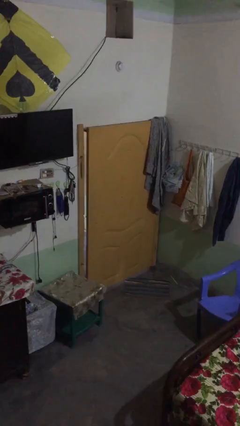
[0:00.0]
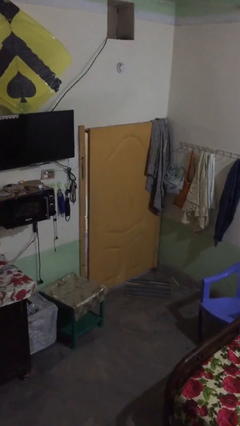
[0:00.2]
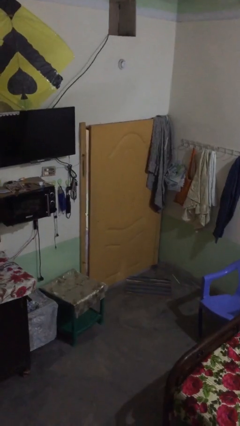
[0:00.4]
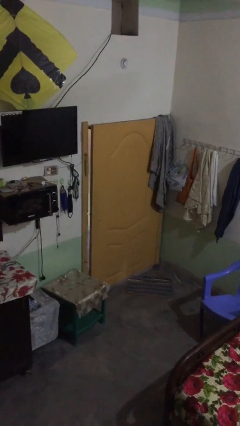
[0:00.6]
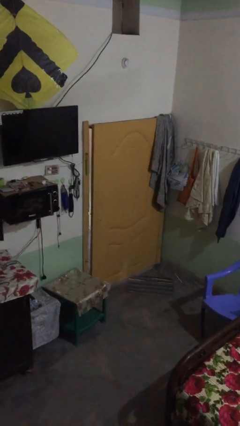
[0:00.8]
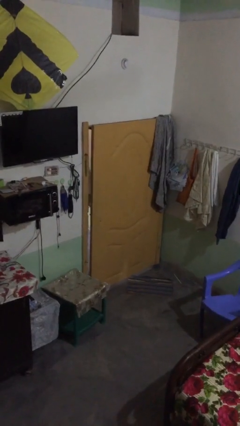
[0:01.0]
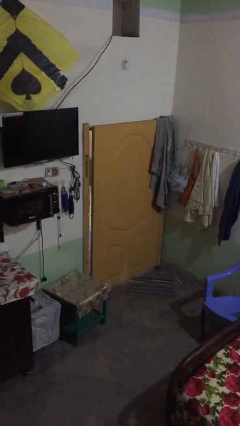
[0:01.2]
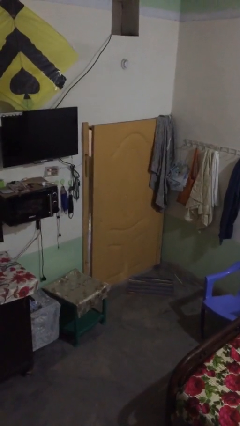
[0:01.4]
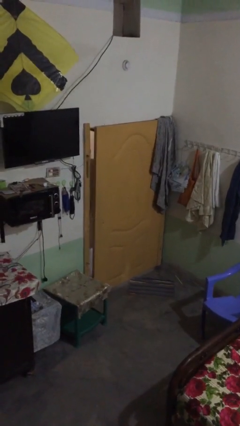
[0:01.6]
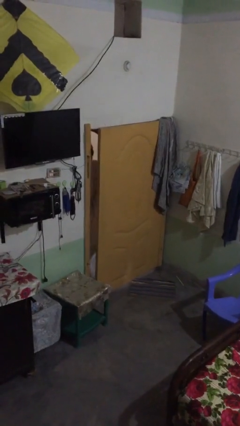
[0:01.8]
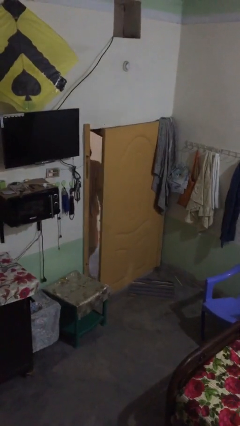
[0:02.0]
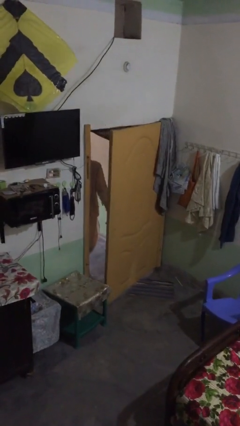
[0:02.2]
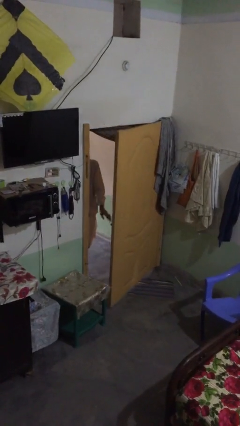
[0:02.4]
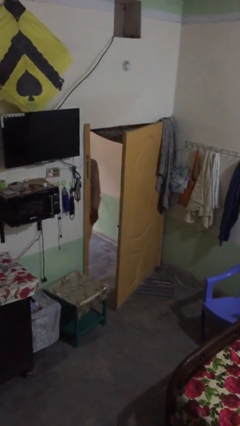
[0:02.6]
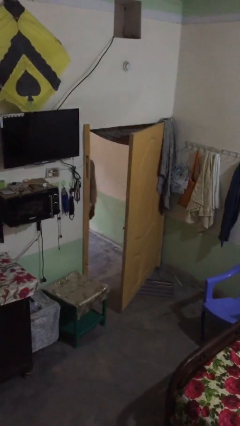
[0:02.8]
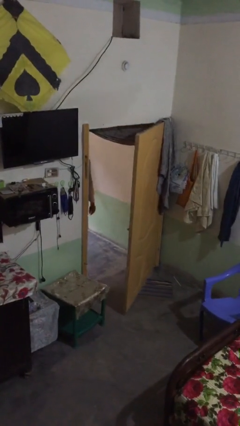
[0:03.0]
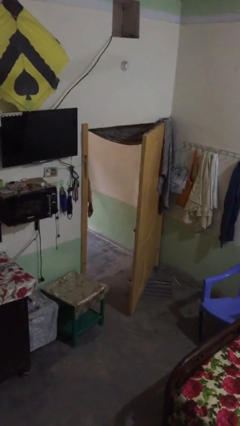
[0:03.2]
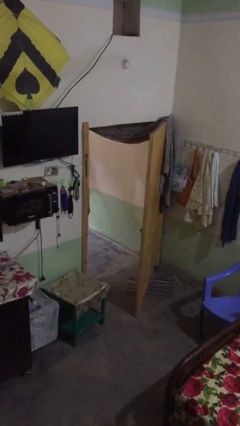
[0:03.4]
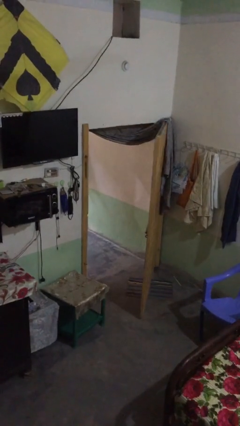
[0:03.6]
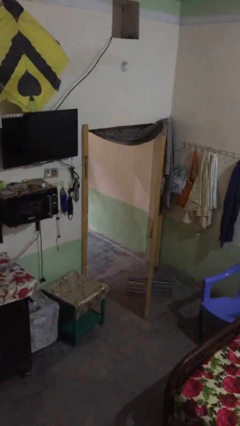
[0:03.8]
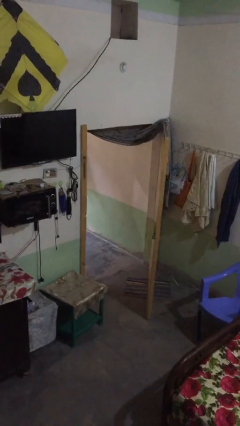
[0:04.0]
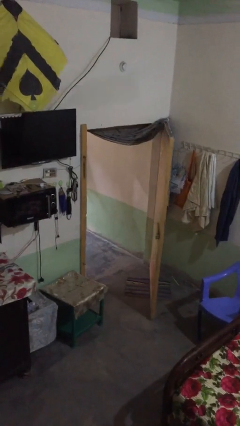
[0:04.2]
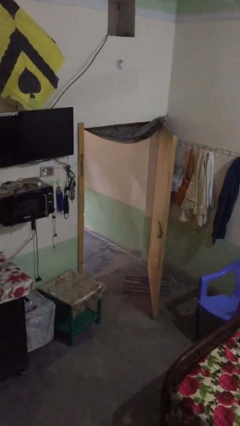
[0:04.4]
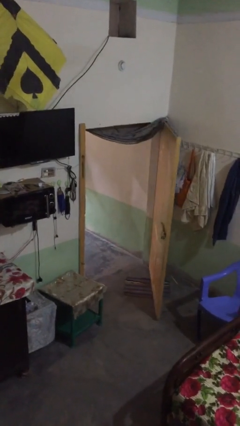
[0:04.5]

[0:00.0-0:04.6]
person opens facility door

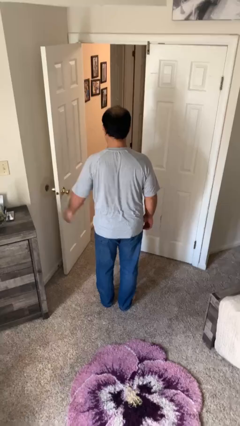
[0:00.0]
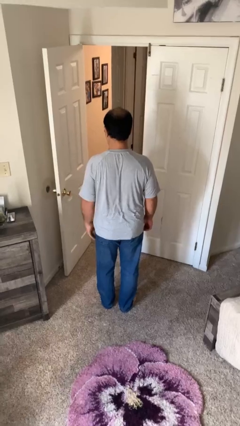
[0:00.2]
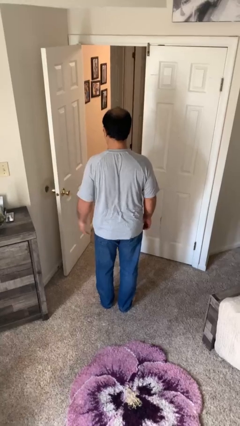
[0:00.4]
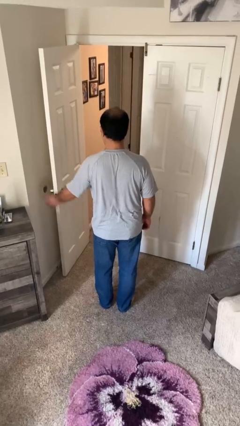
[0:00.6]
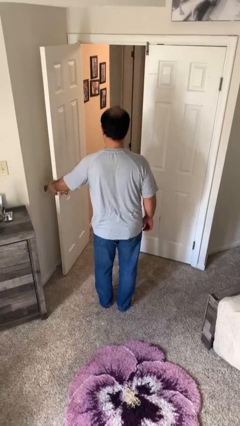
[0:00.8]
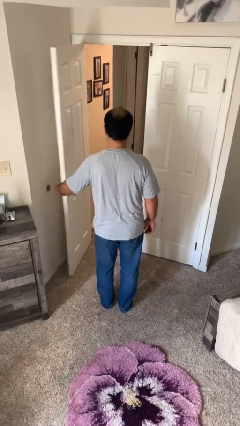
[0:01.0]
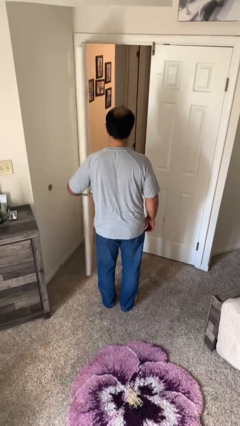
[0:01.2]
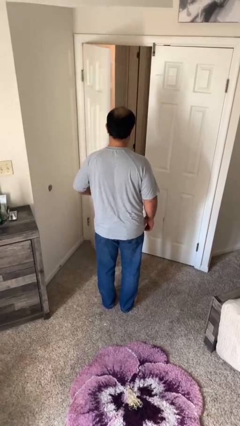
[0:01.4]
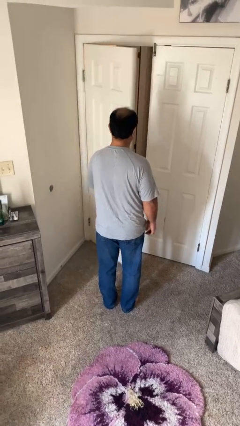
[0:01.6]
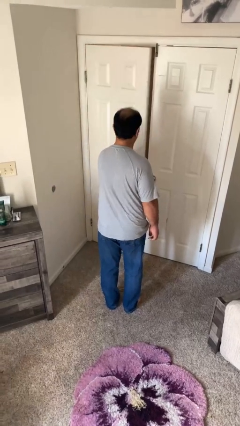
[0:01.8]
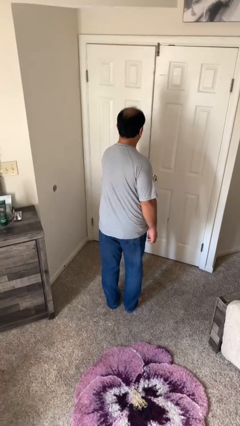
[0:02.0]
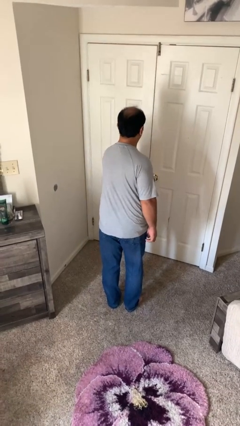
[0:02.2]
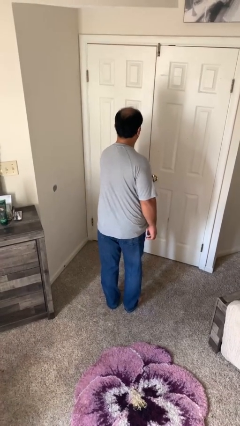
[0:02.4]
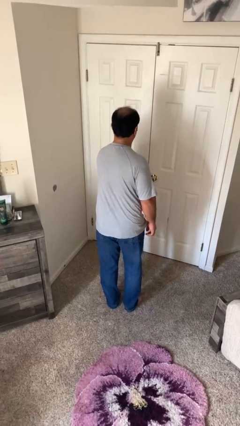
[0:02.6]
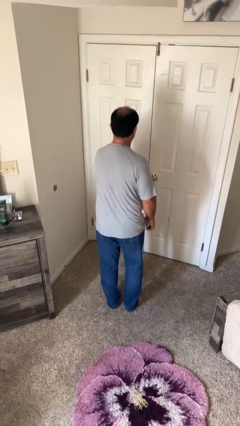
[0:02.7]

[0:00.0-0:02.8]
person closes facility door

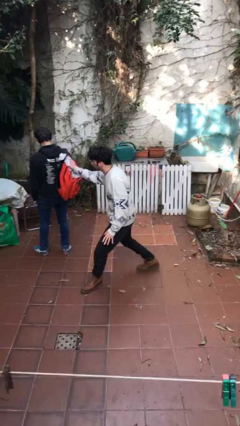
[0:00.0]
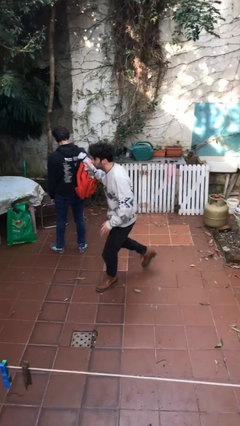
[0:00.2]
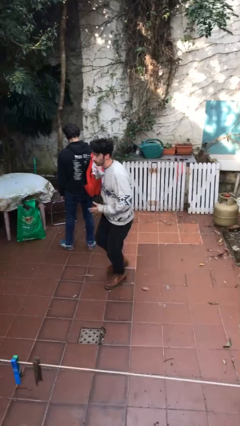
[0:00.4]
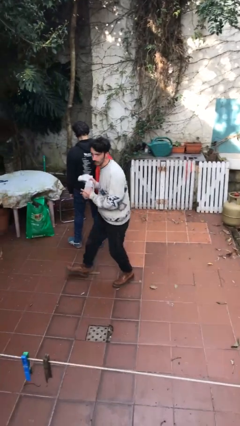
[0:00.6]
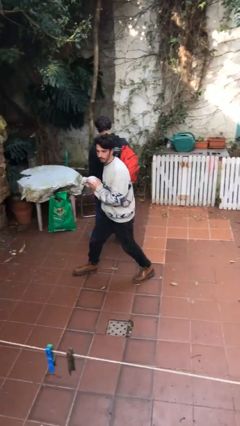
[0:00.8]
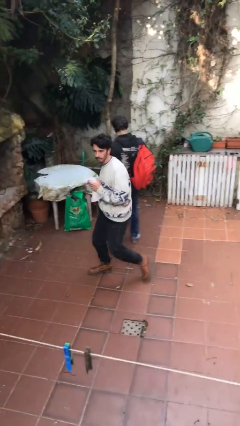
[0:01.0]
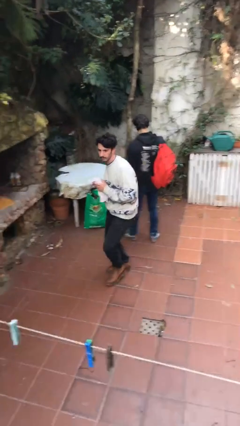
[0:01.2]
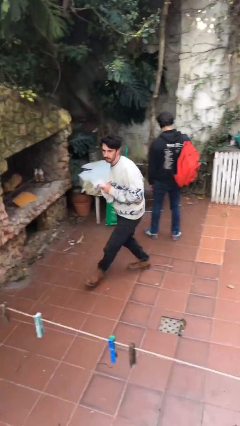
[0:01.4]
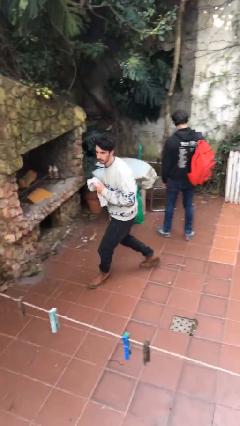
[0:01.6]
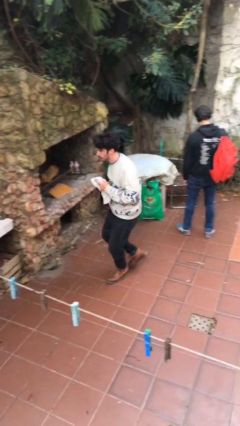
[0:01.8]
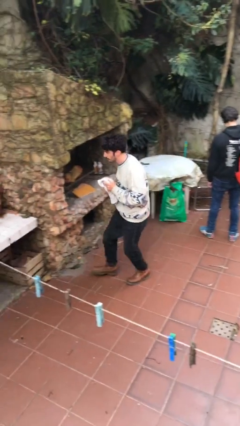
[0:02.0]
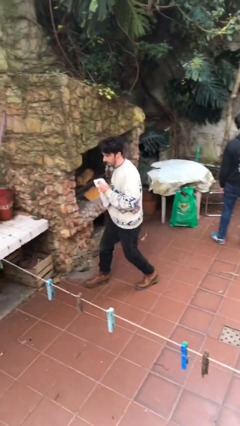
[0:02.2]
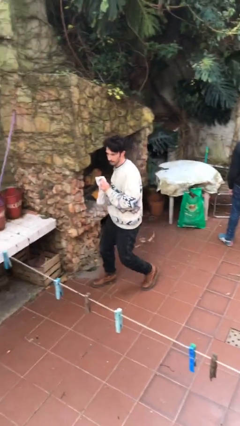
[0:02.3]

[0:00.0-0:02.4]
person steals object from person

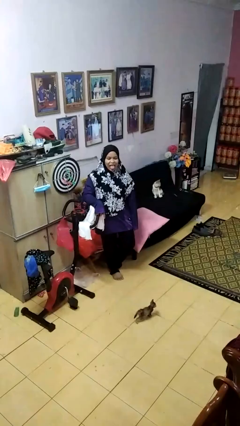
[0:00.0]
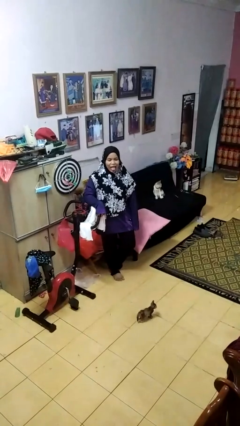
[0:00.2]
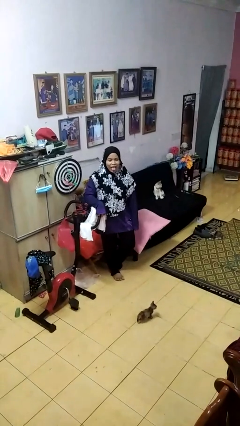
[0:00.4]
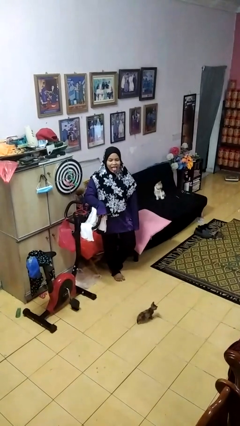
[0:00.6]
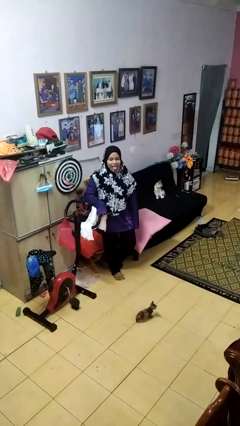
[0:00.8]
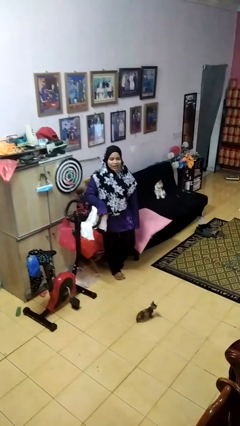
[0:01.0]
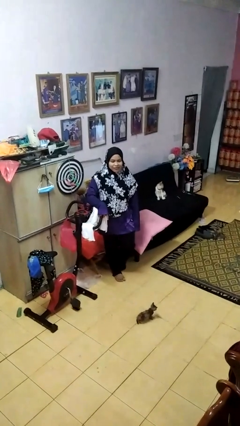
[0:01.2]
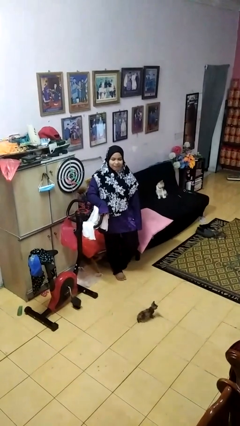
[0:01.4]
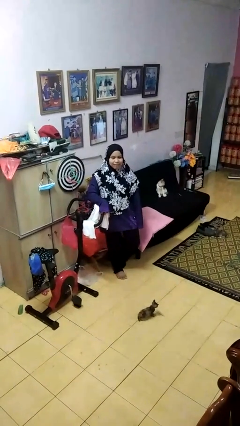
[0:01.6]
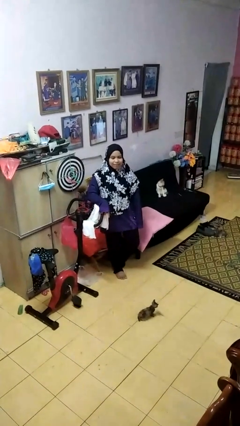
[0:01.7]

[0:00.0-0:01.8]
person sticks out tongue

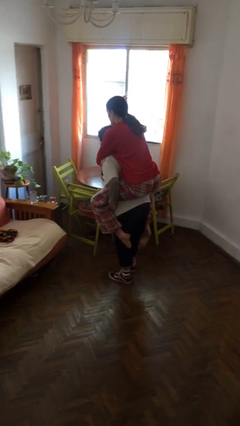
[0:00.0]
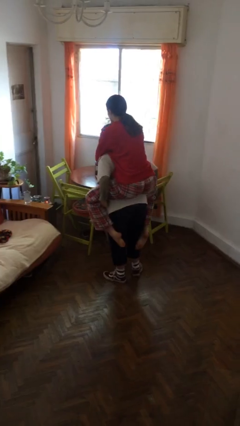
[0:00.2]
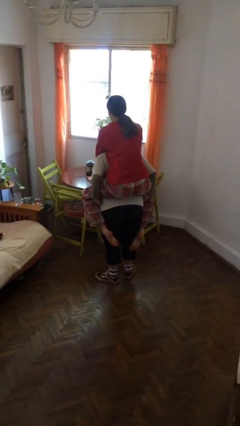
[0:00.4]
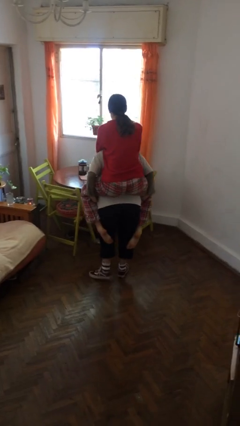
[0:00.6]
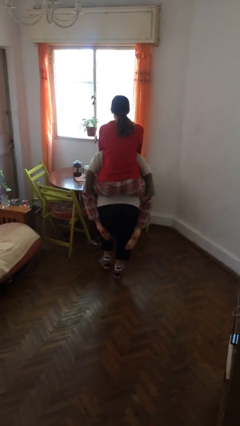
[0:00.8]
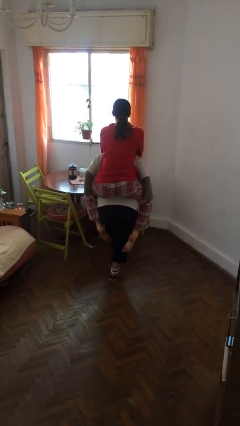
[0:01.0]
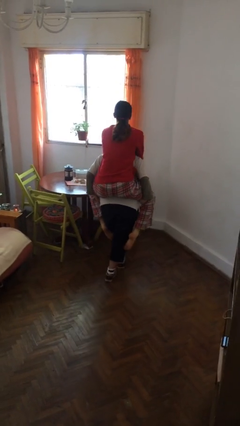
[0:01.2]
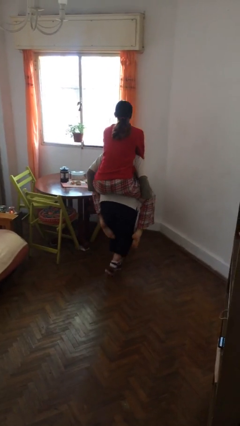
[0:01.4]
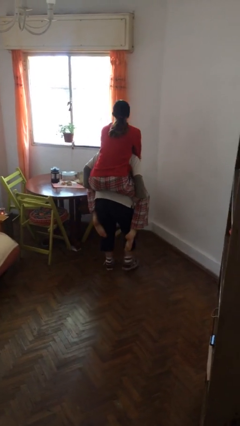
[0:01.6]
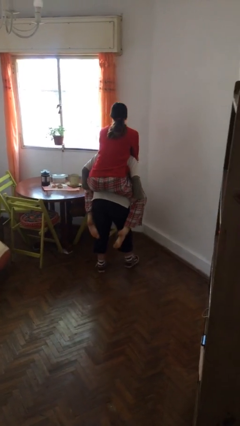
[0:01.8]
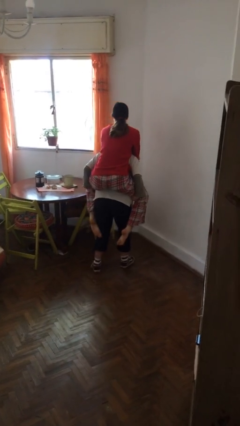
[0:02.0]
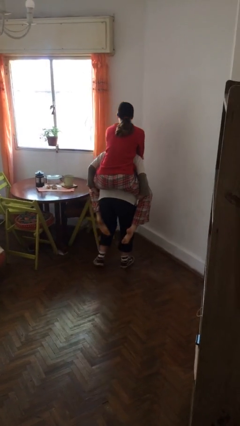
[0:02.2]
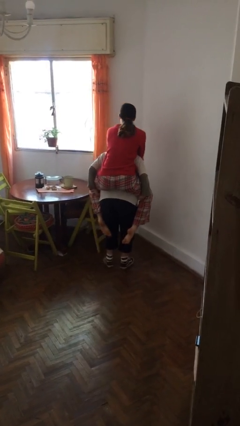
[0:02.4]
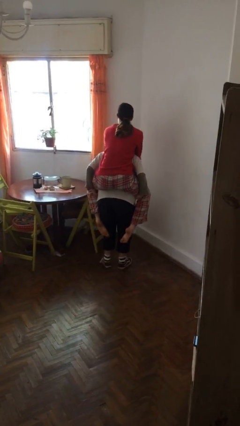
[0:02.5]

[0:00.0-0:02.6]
person carries person on back

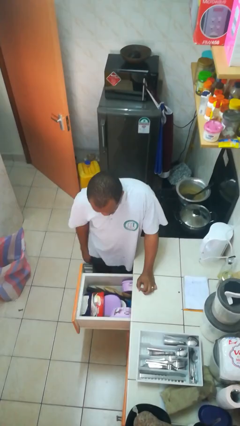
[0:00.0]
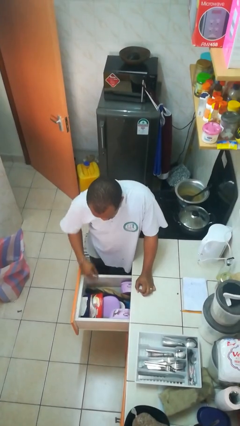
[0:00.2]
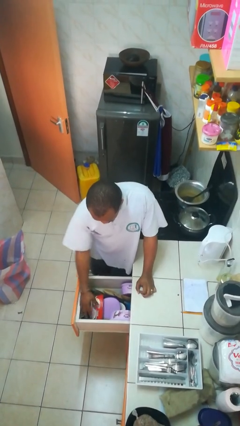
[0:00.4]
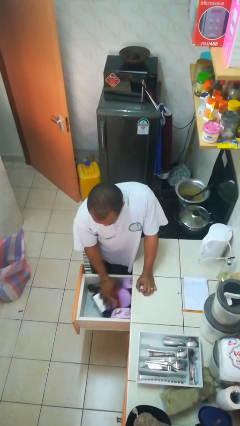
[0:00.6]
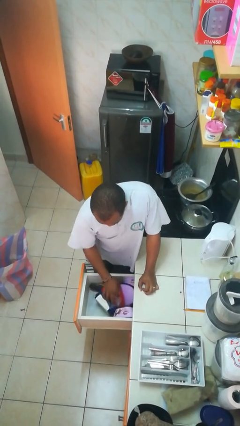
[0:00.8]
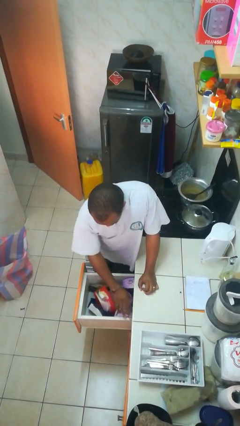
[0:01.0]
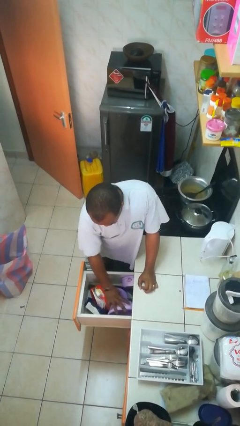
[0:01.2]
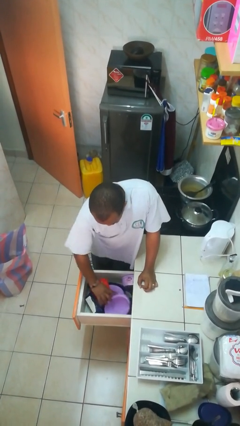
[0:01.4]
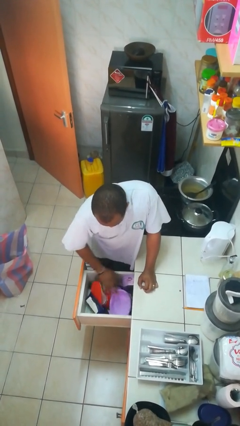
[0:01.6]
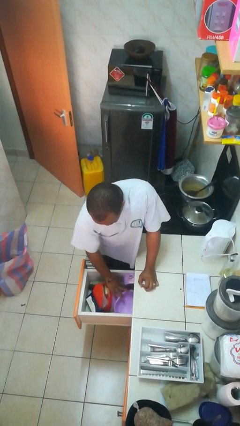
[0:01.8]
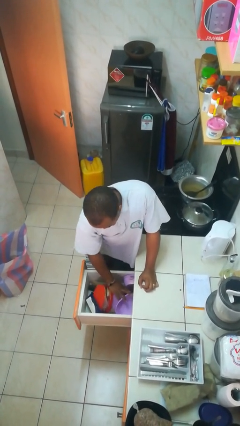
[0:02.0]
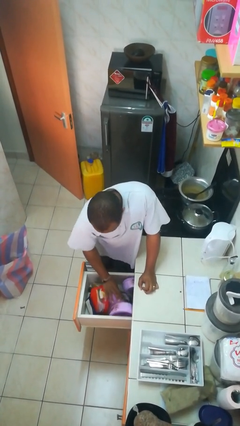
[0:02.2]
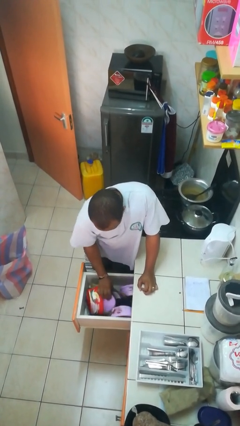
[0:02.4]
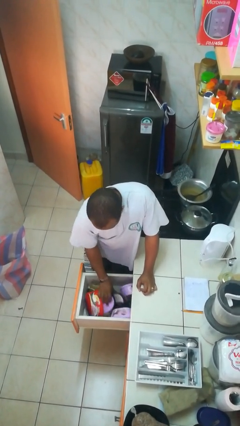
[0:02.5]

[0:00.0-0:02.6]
person searches in kitchen drawer

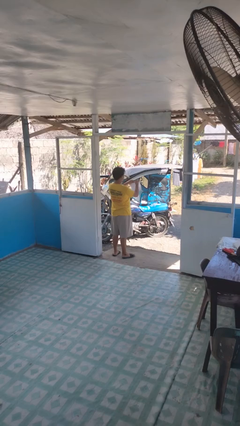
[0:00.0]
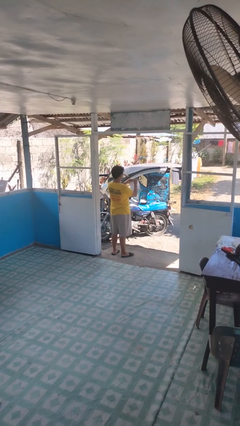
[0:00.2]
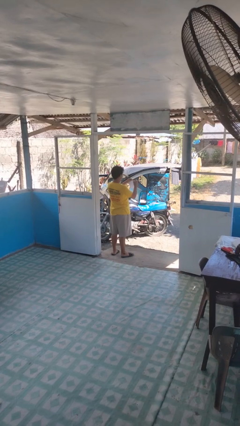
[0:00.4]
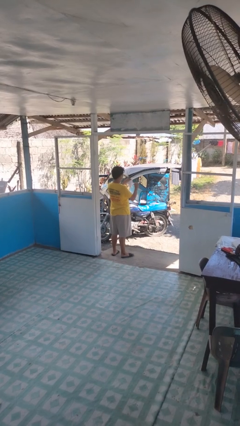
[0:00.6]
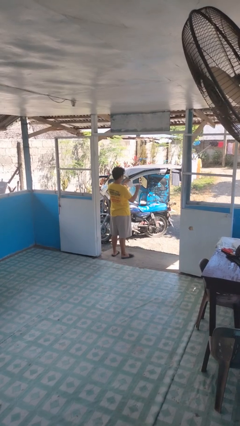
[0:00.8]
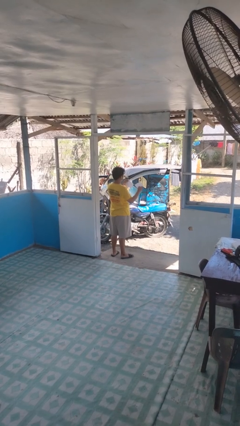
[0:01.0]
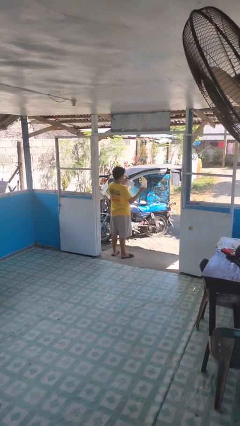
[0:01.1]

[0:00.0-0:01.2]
person tears paper
